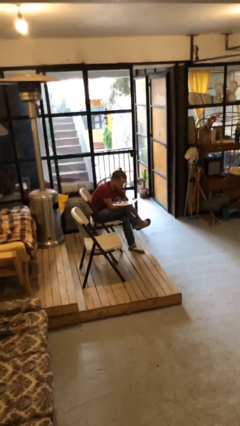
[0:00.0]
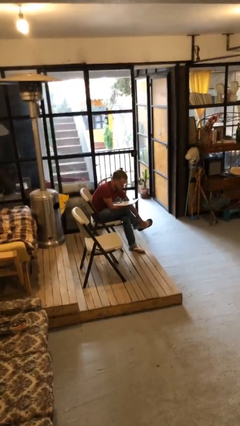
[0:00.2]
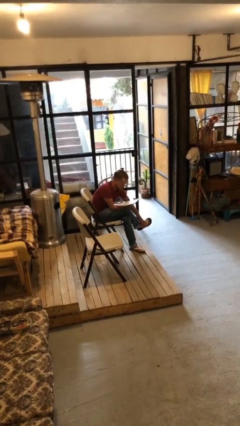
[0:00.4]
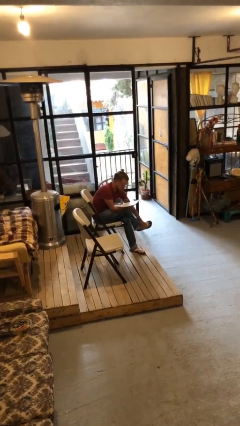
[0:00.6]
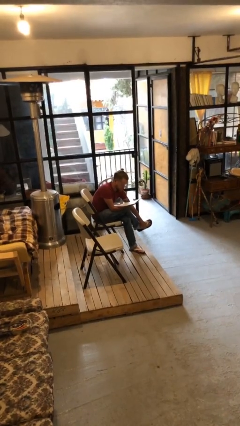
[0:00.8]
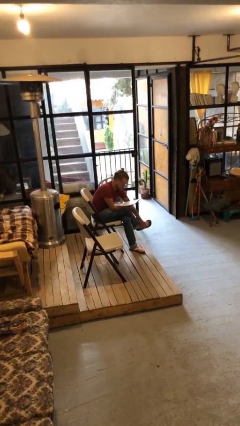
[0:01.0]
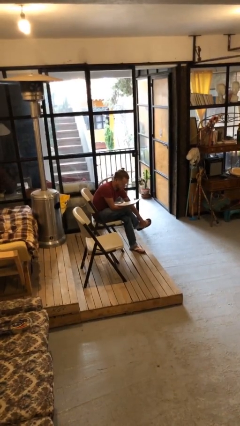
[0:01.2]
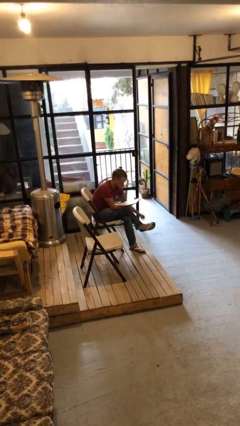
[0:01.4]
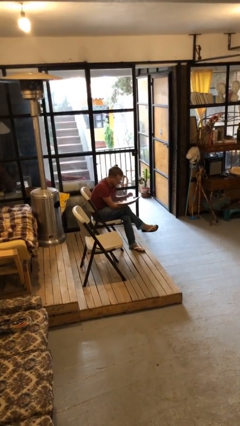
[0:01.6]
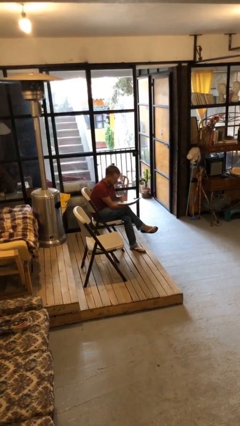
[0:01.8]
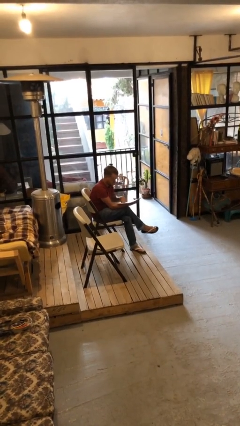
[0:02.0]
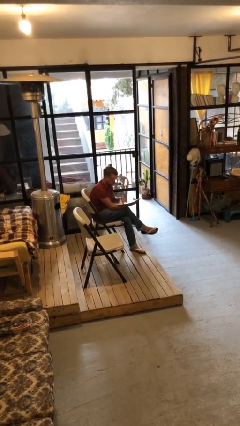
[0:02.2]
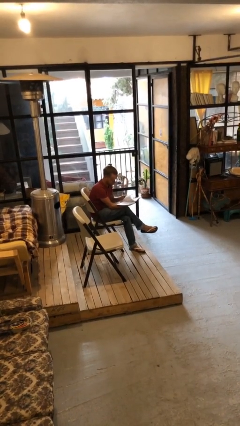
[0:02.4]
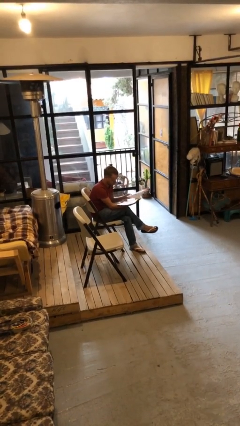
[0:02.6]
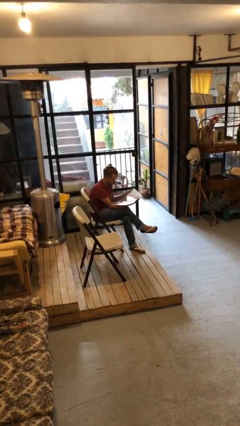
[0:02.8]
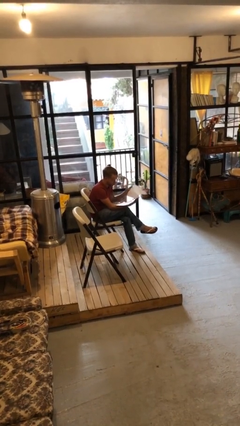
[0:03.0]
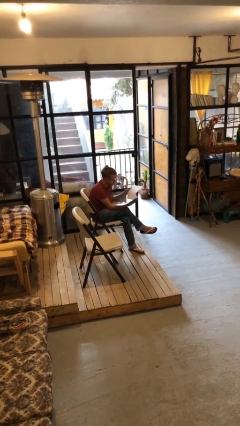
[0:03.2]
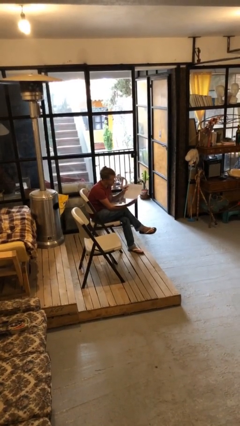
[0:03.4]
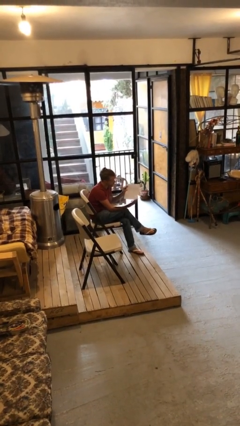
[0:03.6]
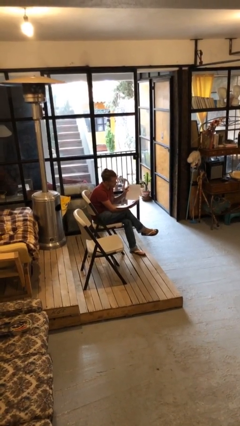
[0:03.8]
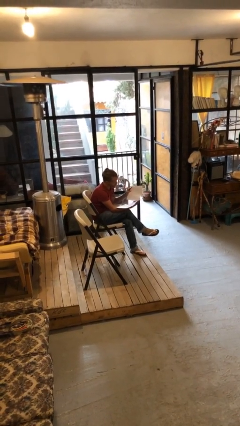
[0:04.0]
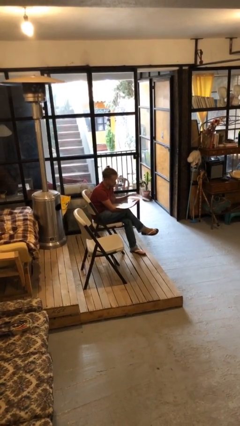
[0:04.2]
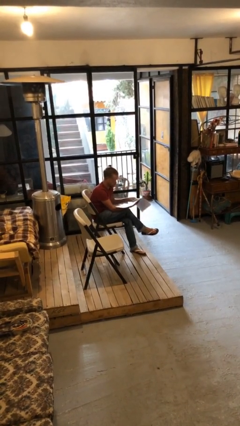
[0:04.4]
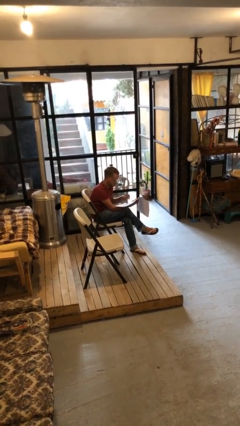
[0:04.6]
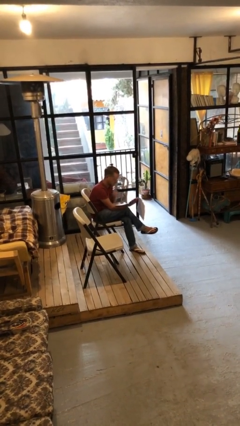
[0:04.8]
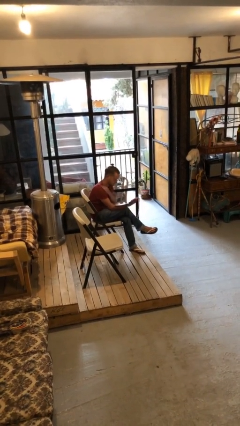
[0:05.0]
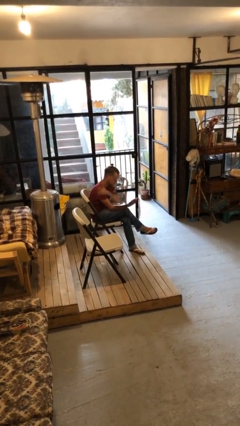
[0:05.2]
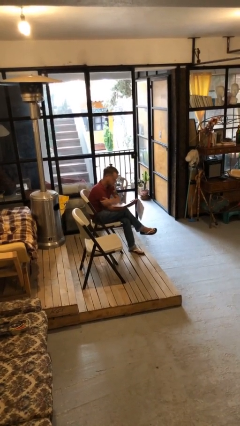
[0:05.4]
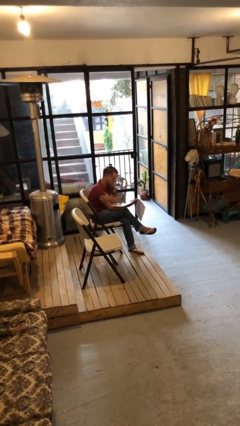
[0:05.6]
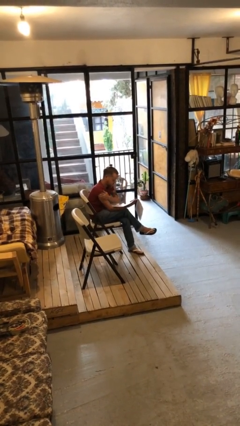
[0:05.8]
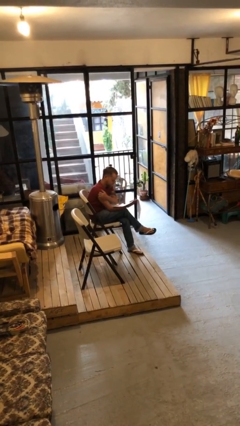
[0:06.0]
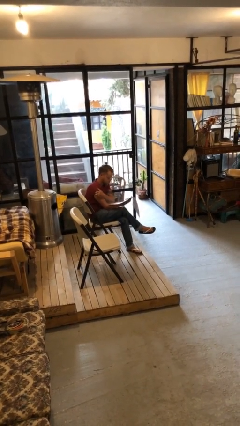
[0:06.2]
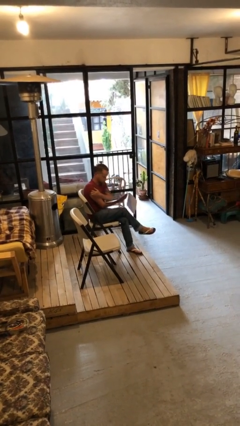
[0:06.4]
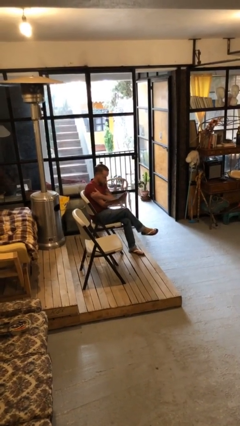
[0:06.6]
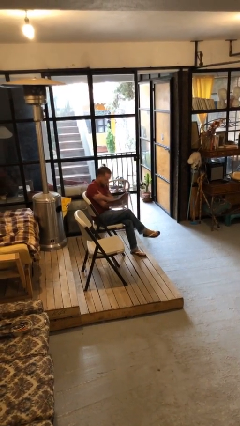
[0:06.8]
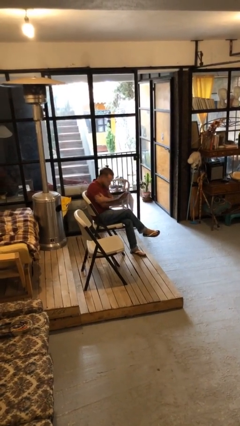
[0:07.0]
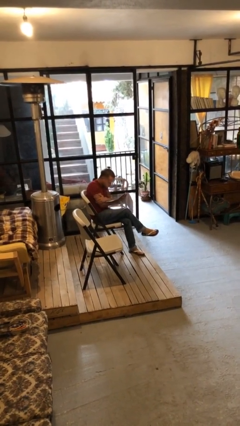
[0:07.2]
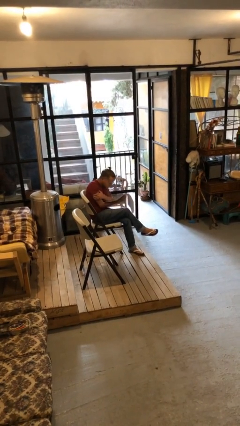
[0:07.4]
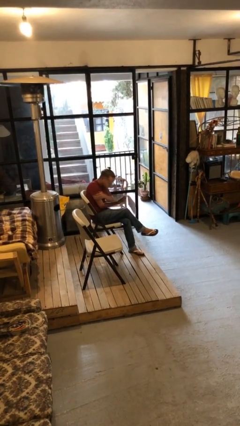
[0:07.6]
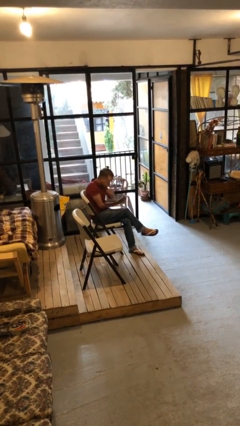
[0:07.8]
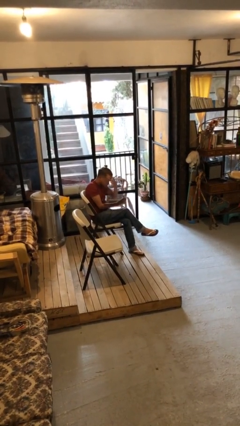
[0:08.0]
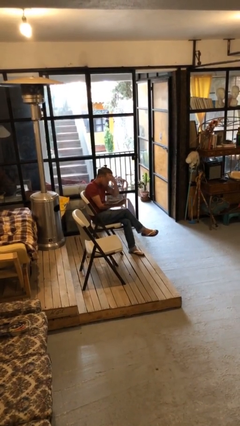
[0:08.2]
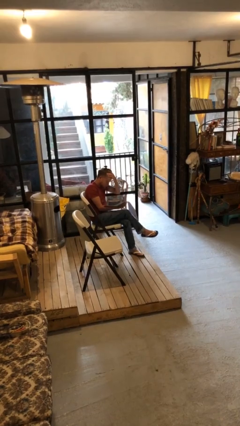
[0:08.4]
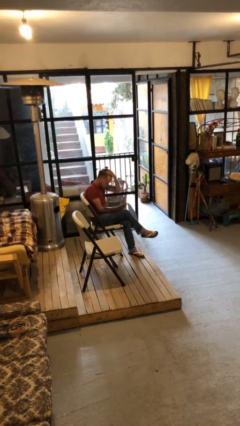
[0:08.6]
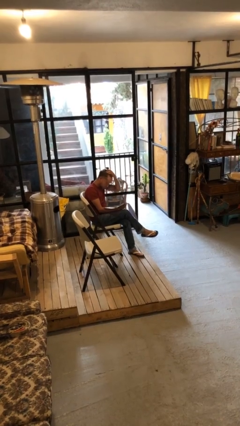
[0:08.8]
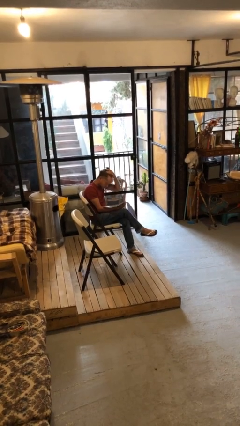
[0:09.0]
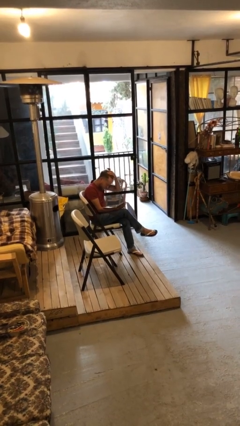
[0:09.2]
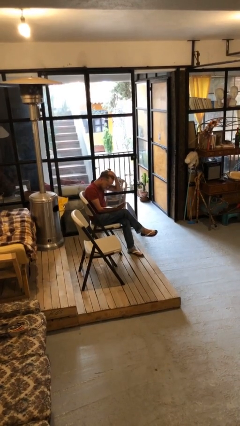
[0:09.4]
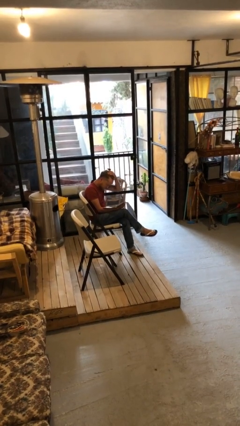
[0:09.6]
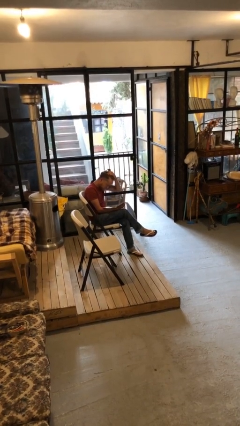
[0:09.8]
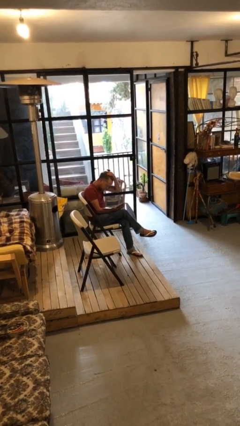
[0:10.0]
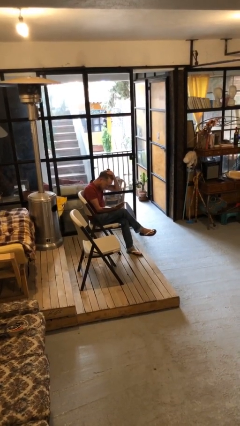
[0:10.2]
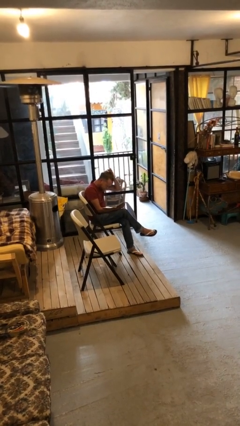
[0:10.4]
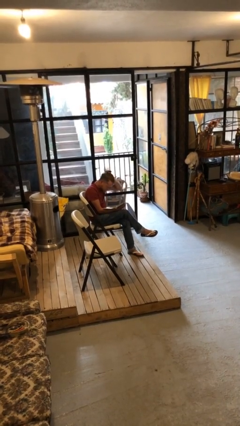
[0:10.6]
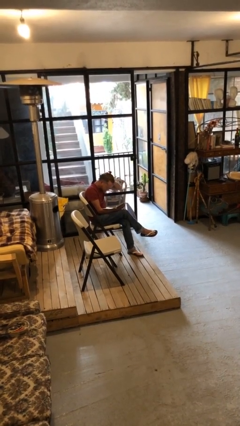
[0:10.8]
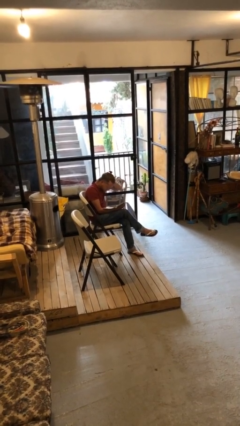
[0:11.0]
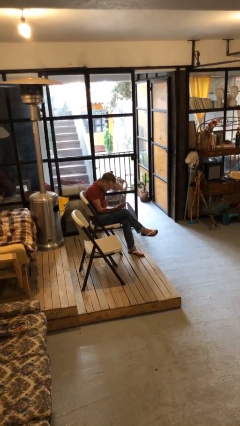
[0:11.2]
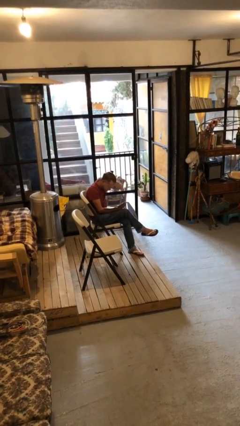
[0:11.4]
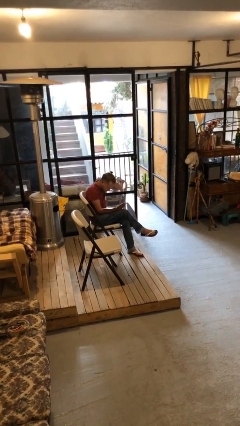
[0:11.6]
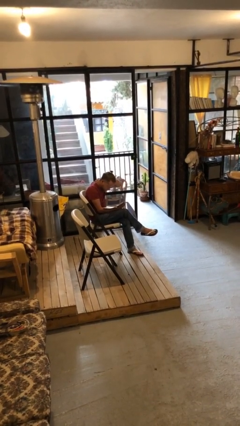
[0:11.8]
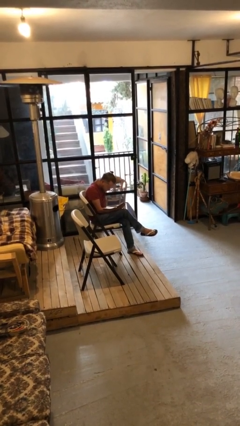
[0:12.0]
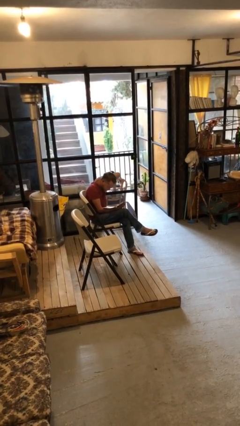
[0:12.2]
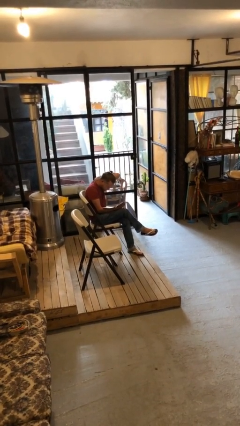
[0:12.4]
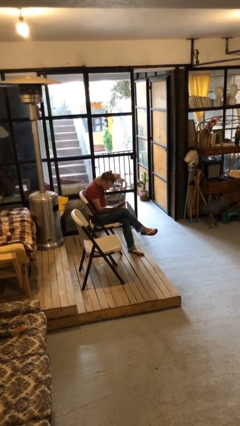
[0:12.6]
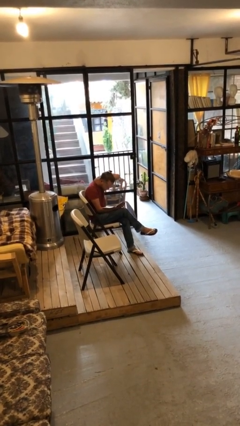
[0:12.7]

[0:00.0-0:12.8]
person reads document

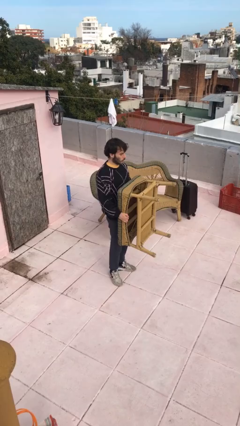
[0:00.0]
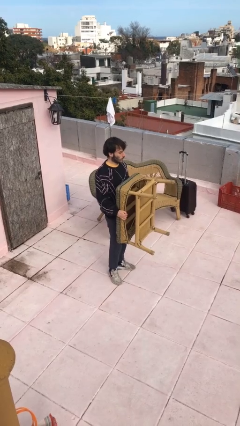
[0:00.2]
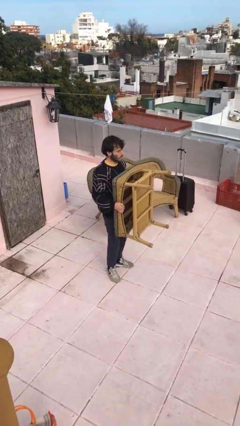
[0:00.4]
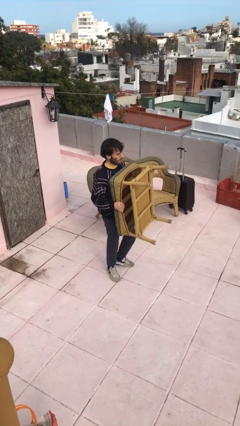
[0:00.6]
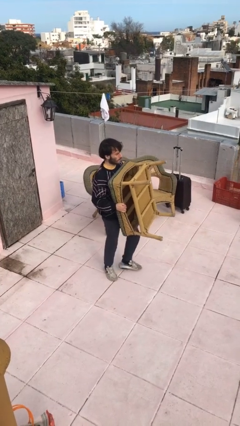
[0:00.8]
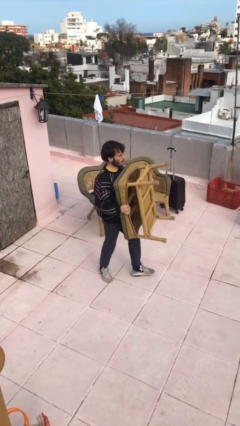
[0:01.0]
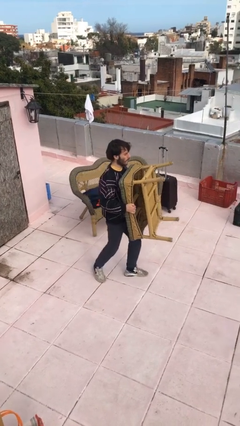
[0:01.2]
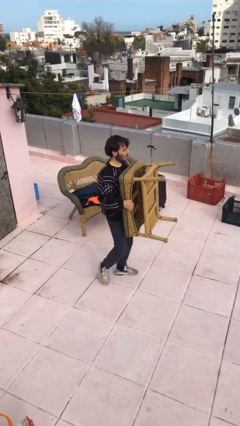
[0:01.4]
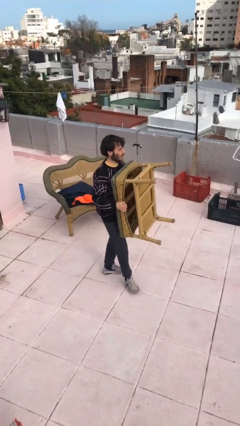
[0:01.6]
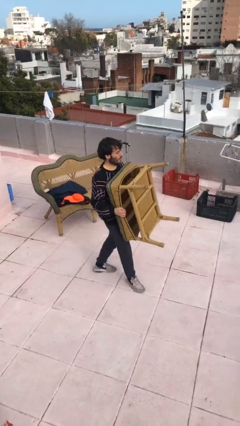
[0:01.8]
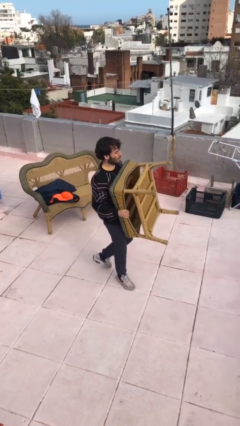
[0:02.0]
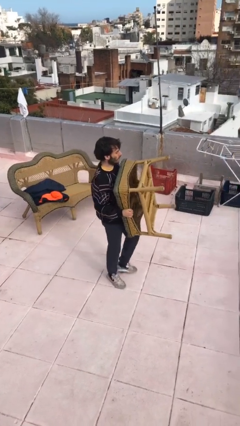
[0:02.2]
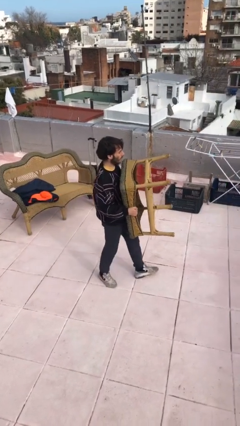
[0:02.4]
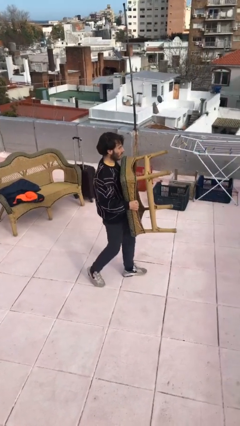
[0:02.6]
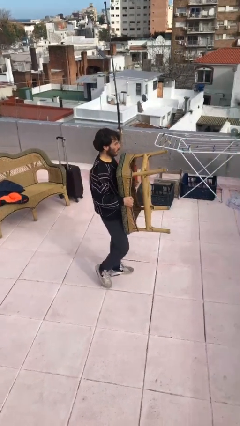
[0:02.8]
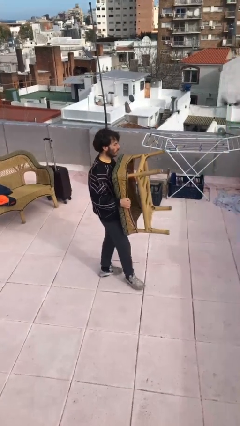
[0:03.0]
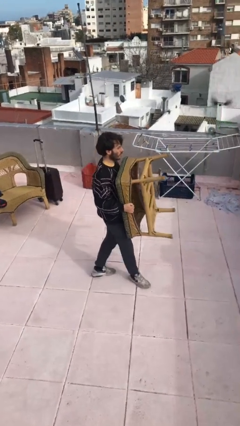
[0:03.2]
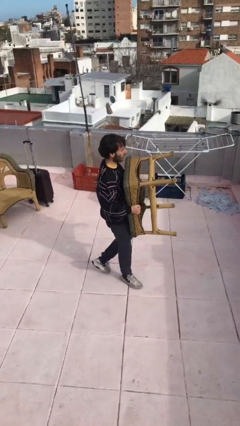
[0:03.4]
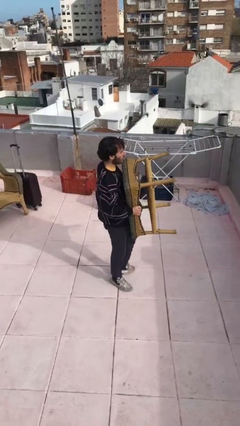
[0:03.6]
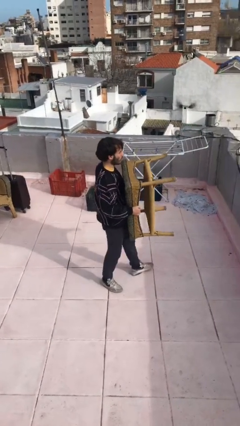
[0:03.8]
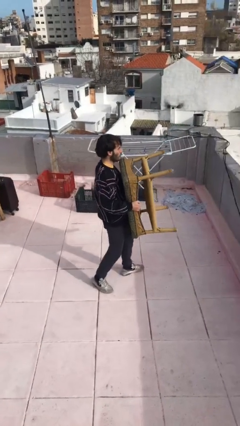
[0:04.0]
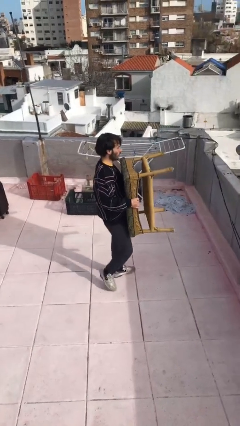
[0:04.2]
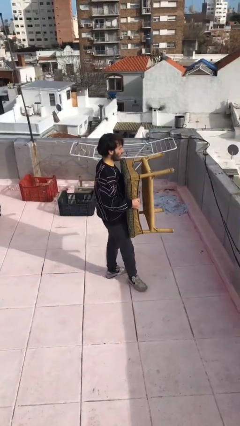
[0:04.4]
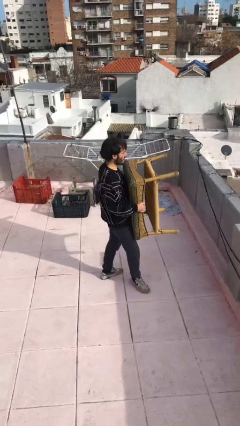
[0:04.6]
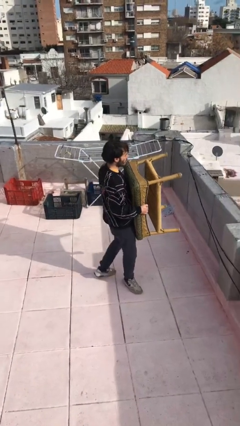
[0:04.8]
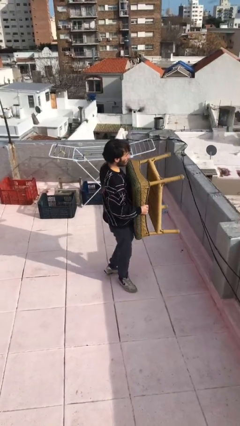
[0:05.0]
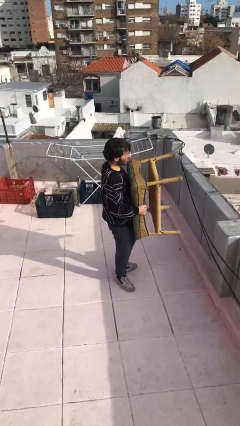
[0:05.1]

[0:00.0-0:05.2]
person carries furniture
